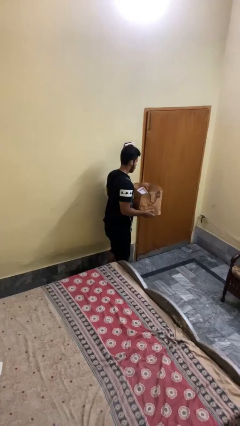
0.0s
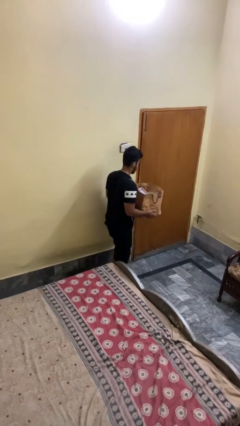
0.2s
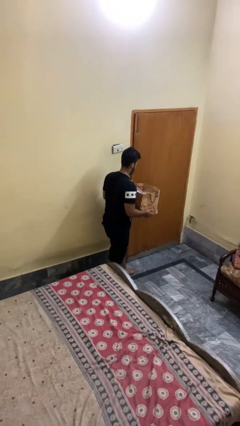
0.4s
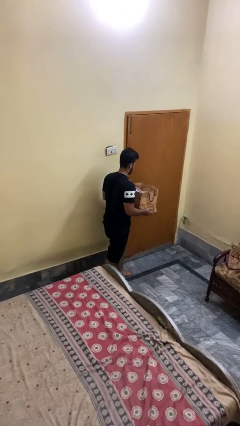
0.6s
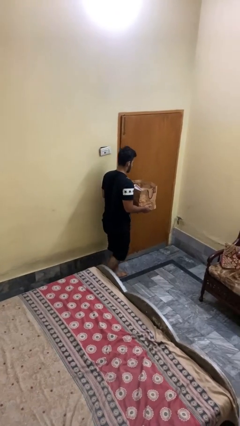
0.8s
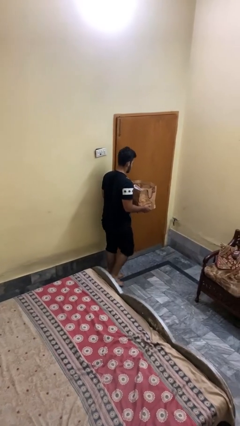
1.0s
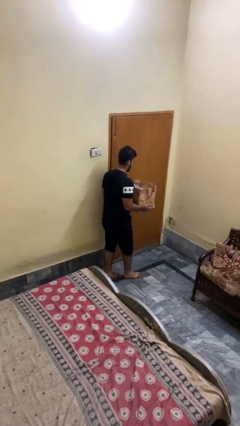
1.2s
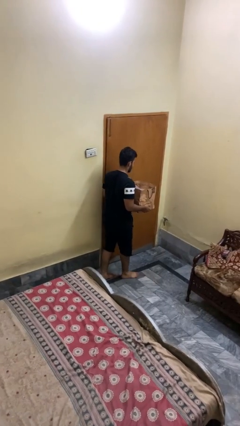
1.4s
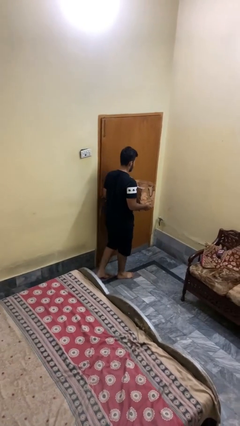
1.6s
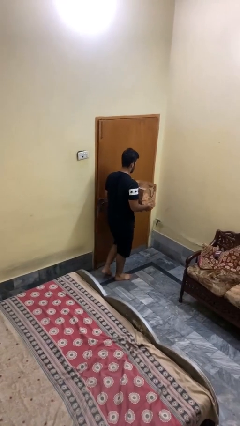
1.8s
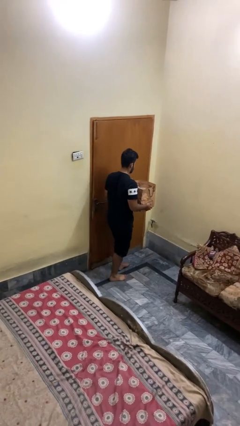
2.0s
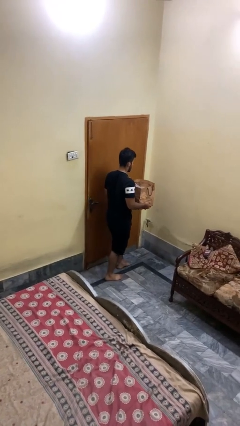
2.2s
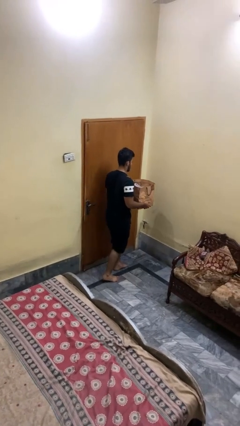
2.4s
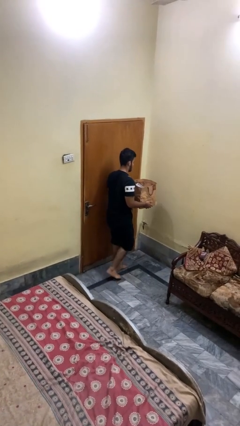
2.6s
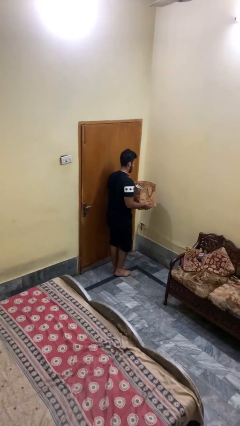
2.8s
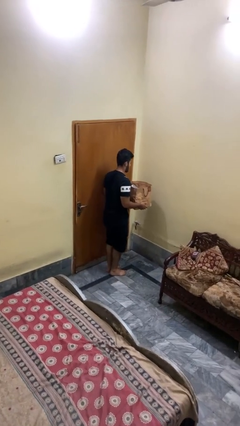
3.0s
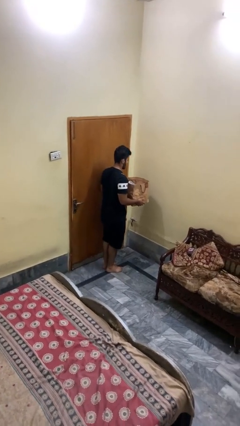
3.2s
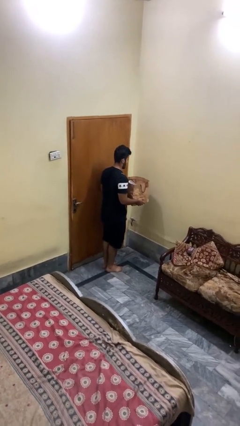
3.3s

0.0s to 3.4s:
person carries groceries

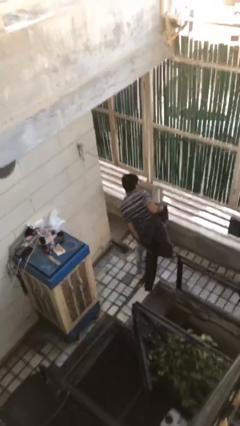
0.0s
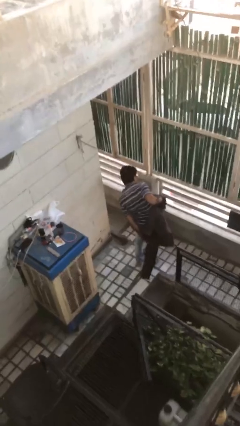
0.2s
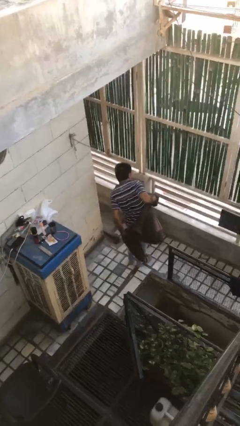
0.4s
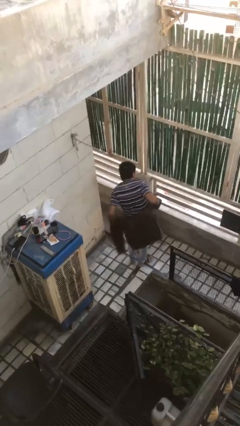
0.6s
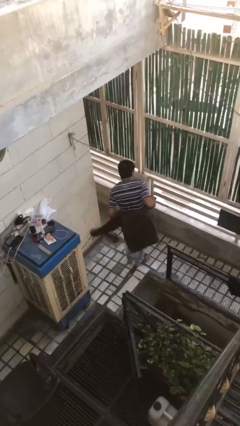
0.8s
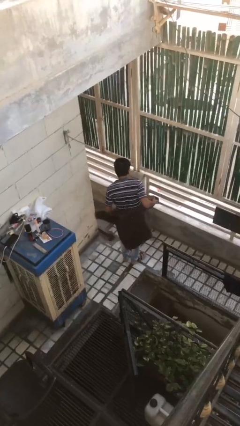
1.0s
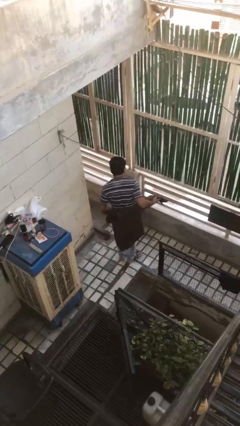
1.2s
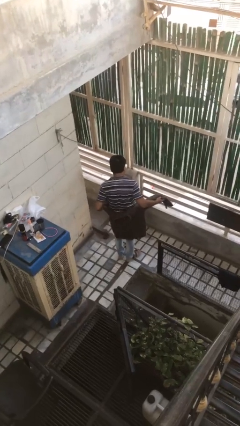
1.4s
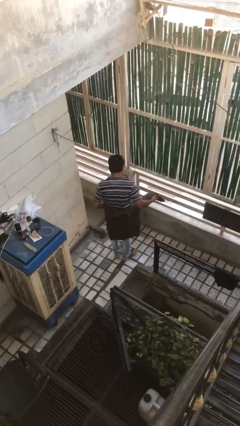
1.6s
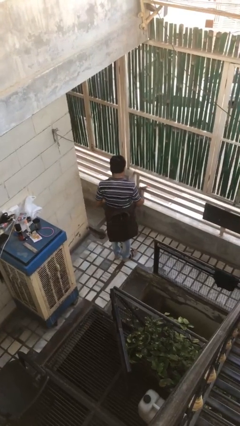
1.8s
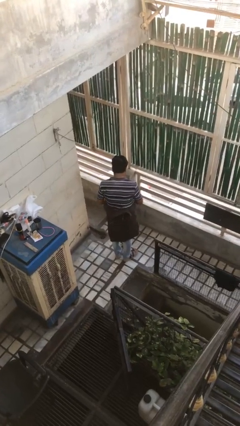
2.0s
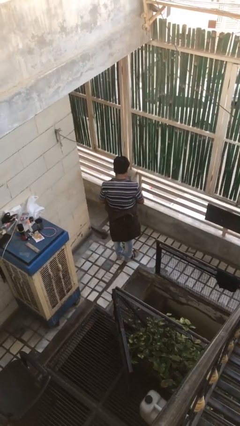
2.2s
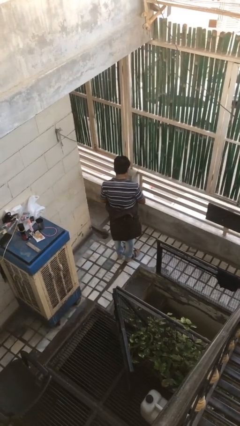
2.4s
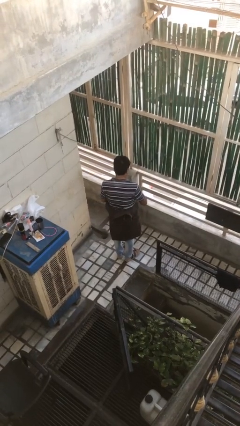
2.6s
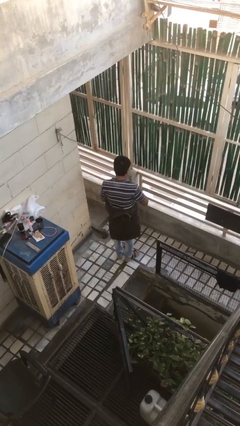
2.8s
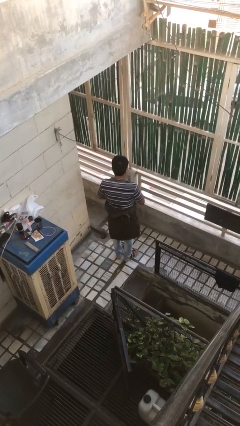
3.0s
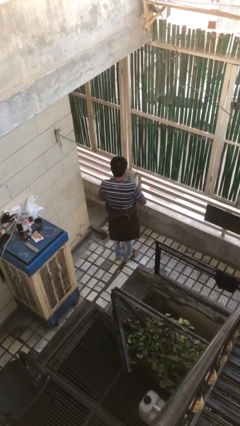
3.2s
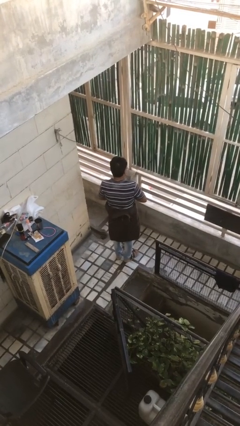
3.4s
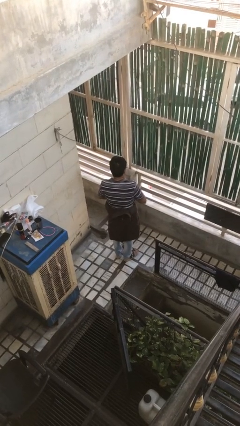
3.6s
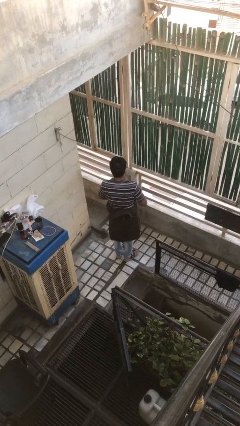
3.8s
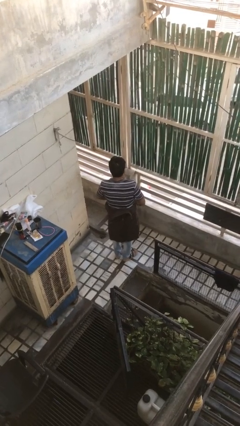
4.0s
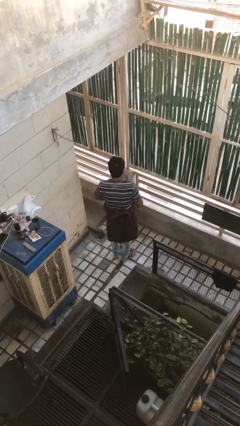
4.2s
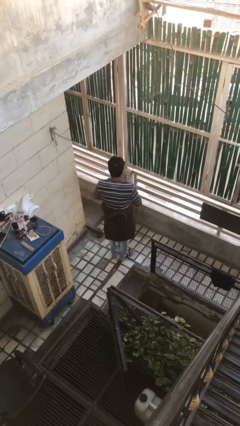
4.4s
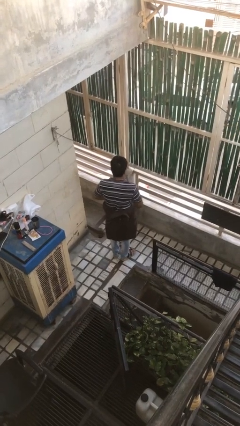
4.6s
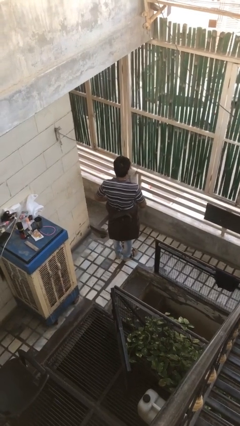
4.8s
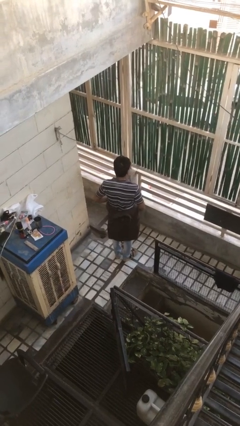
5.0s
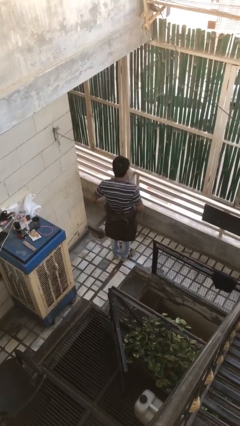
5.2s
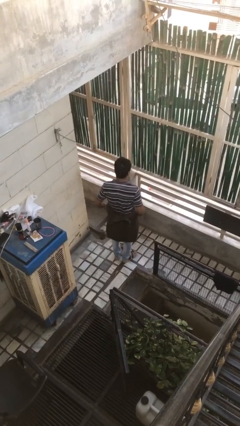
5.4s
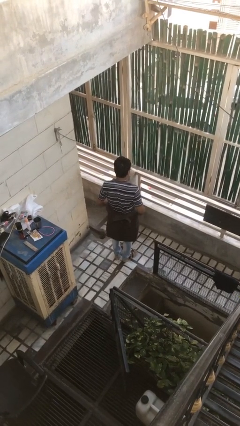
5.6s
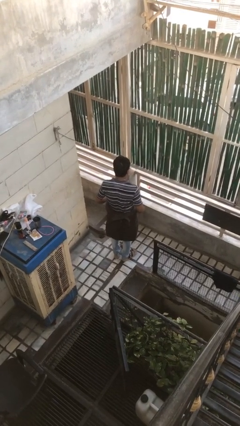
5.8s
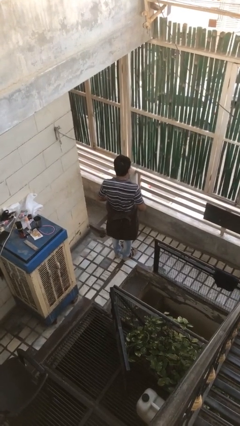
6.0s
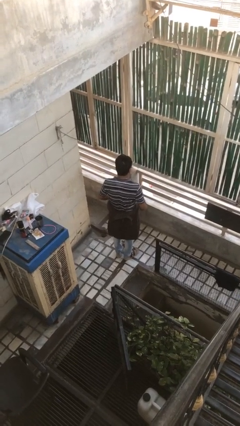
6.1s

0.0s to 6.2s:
person ties jacket around waist

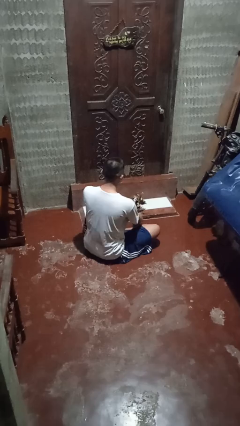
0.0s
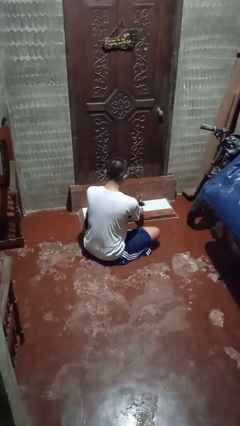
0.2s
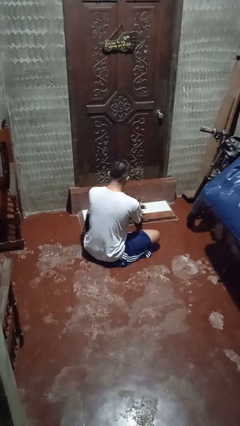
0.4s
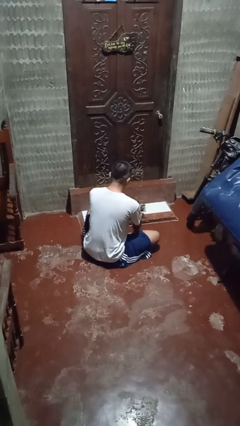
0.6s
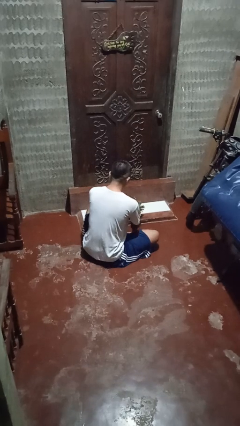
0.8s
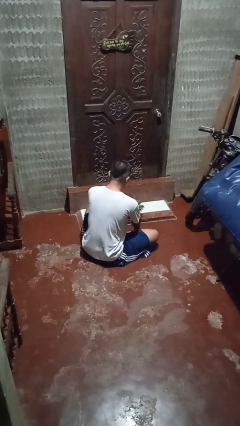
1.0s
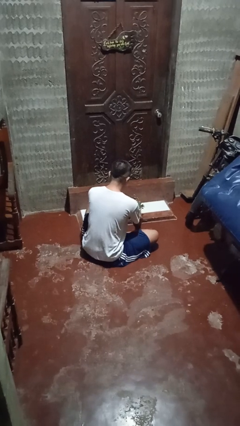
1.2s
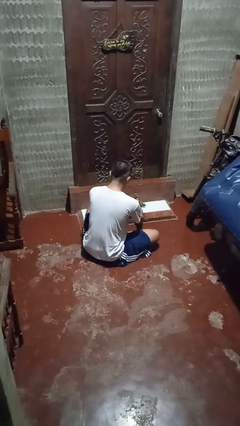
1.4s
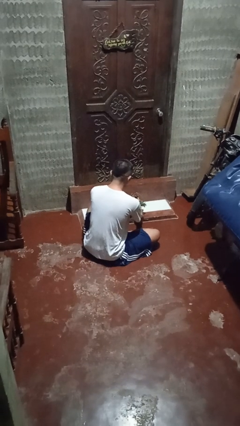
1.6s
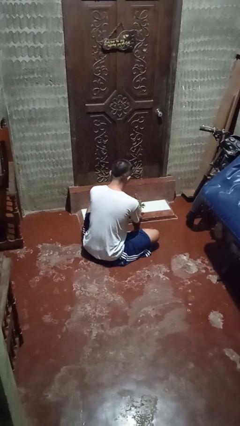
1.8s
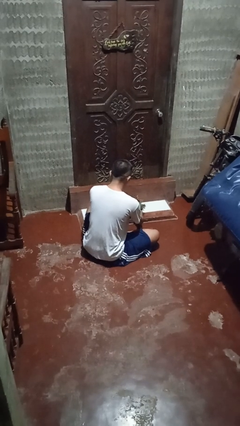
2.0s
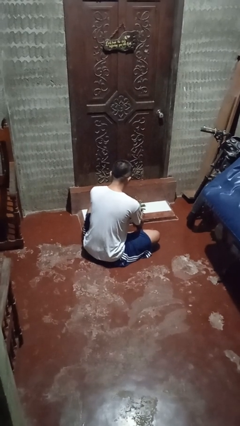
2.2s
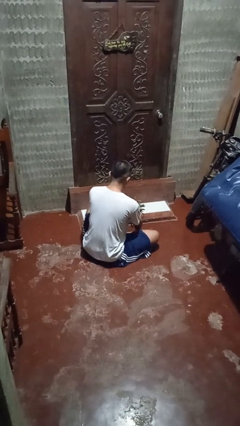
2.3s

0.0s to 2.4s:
person arranges flowers in vase

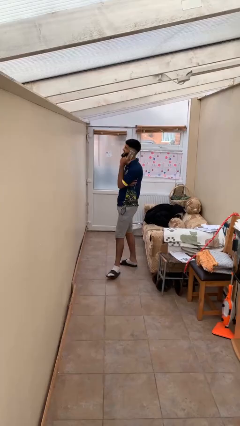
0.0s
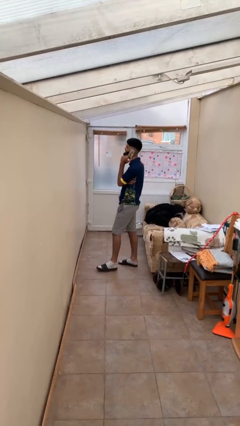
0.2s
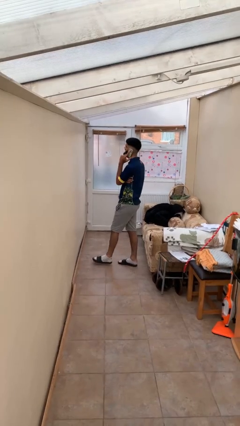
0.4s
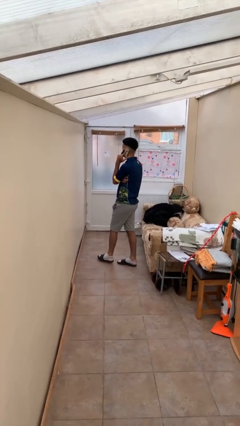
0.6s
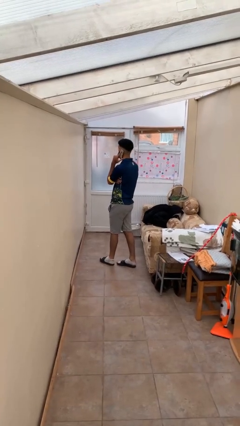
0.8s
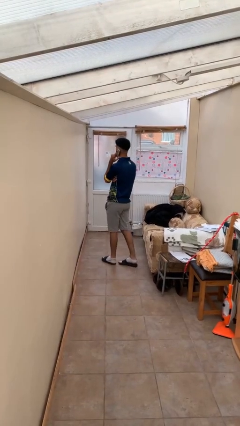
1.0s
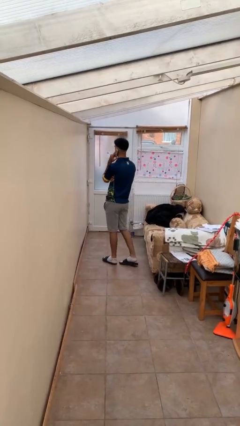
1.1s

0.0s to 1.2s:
person talks on phone

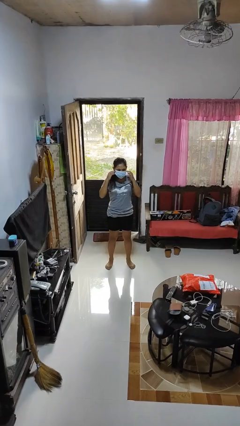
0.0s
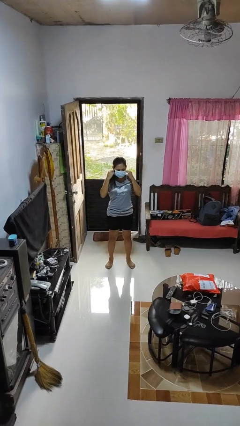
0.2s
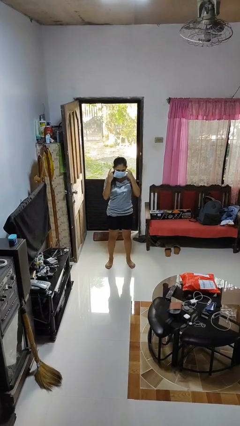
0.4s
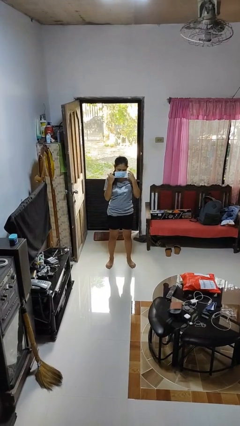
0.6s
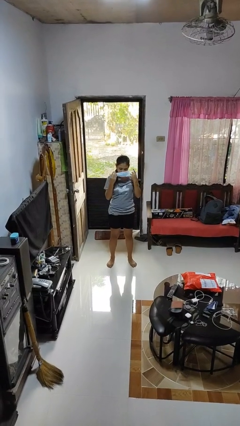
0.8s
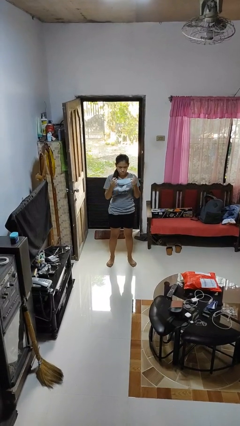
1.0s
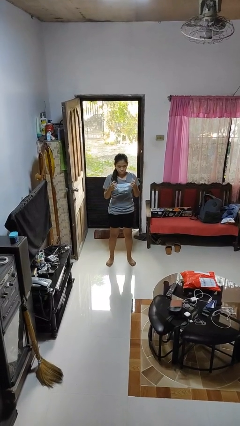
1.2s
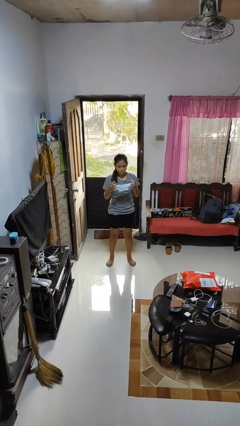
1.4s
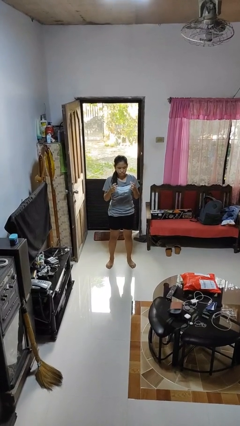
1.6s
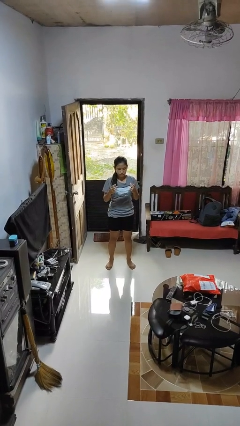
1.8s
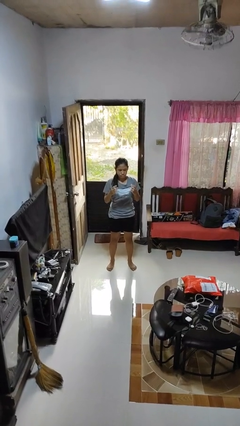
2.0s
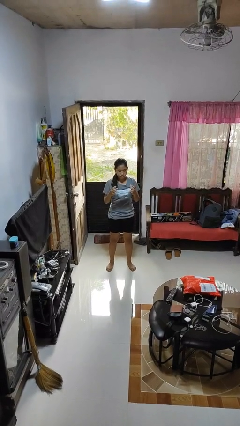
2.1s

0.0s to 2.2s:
person takes off facemask

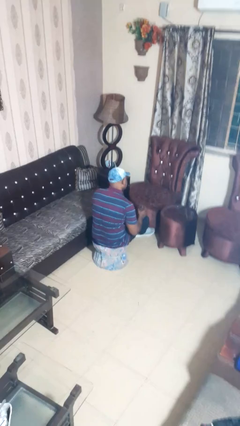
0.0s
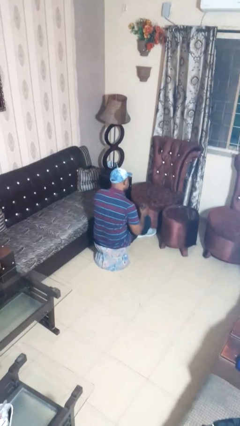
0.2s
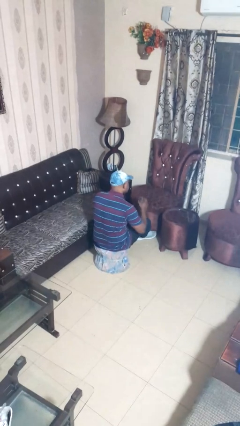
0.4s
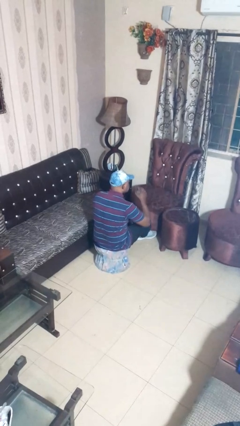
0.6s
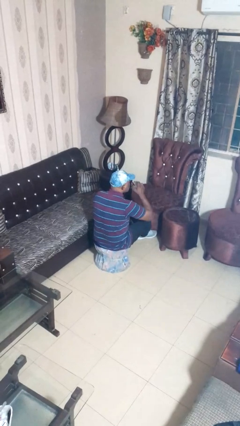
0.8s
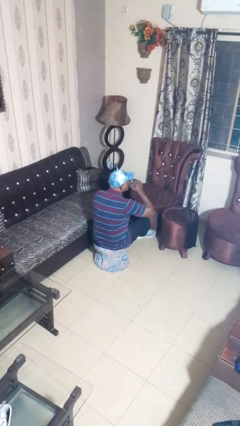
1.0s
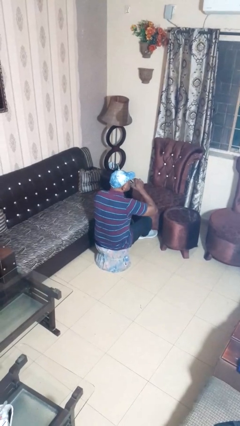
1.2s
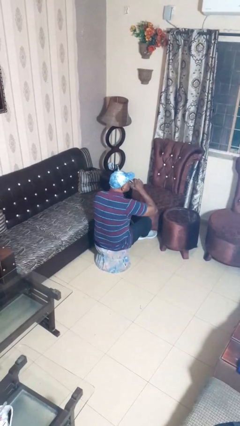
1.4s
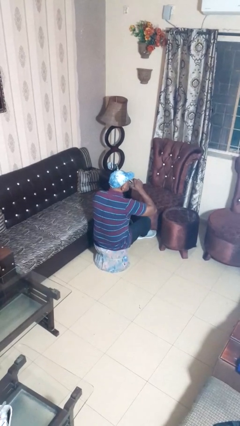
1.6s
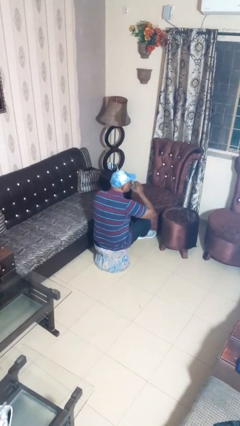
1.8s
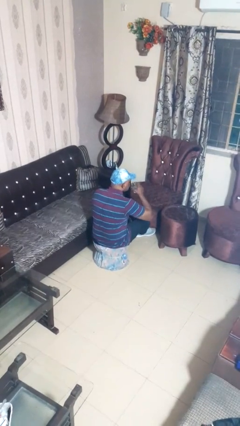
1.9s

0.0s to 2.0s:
person drinks from shotglass

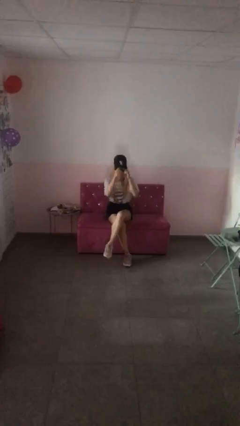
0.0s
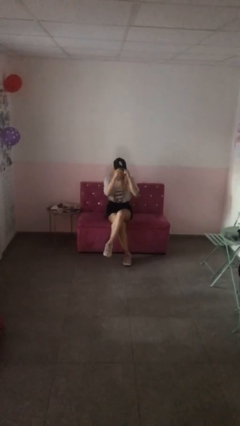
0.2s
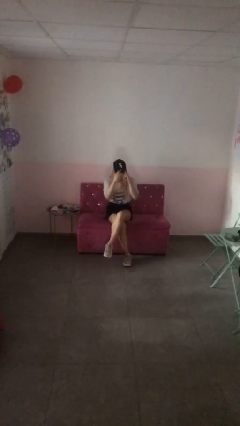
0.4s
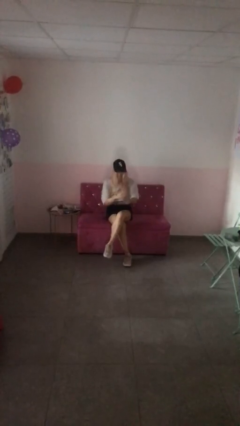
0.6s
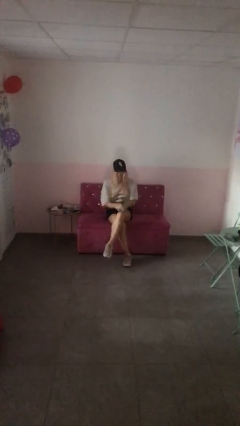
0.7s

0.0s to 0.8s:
person puts on hat
